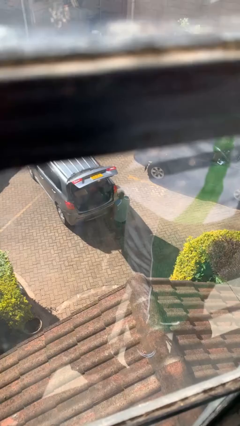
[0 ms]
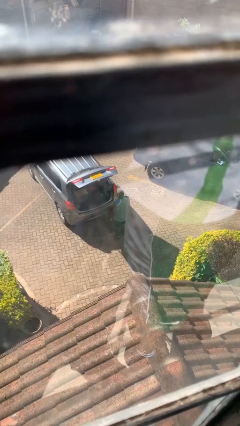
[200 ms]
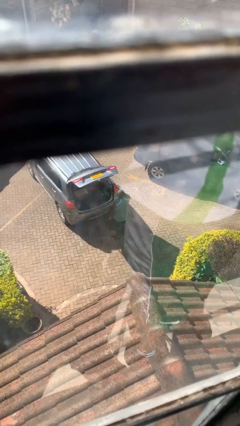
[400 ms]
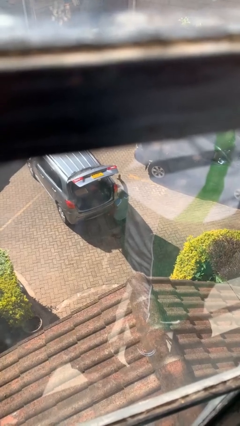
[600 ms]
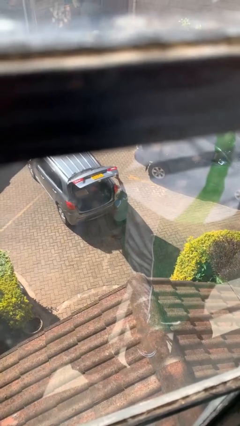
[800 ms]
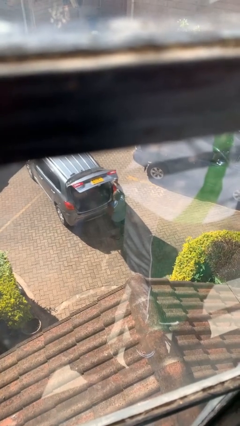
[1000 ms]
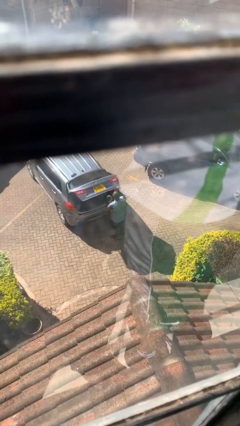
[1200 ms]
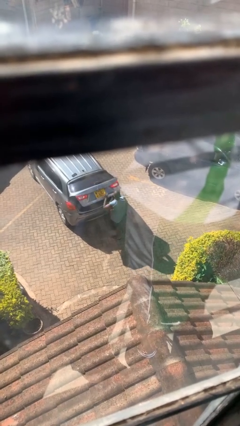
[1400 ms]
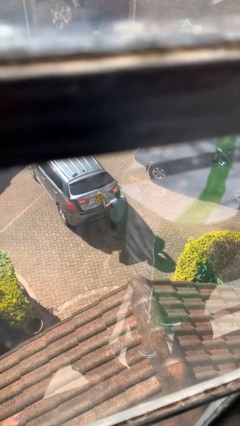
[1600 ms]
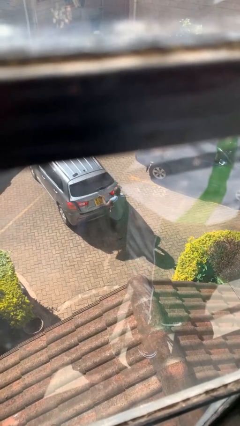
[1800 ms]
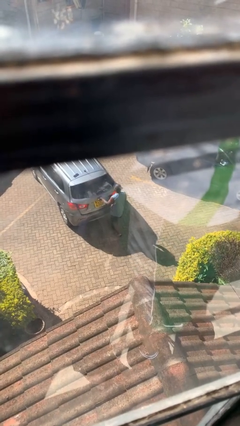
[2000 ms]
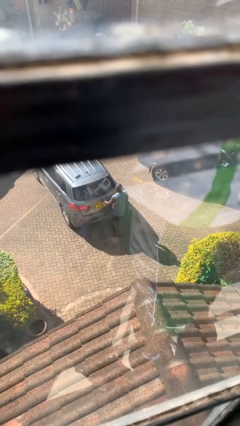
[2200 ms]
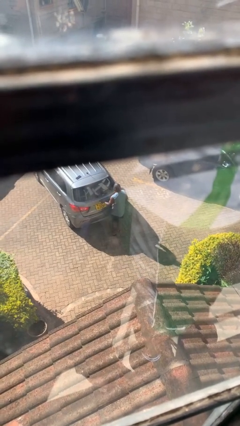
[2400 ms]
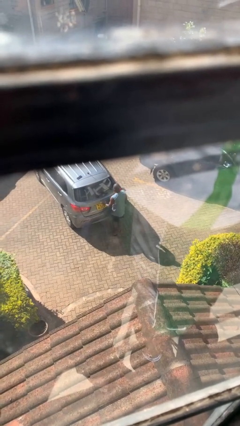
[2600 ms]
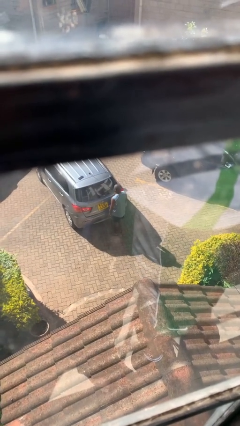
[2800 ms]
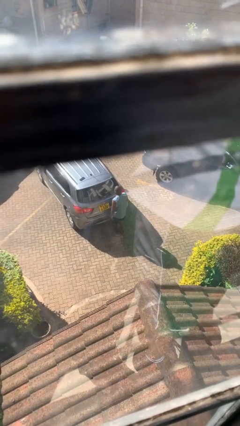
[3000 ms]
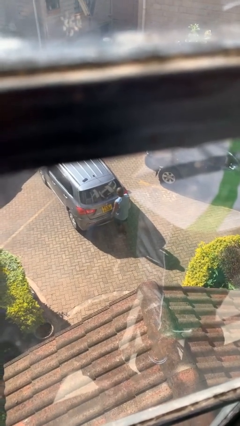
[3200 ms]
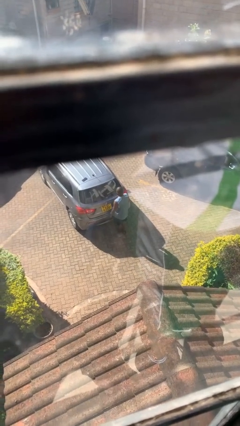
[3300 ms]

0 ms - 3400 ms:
person closes car trunk

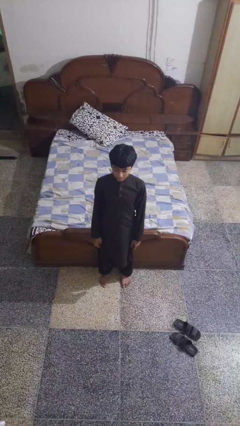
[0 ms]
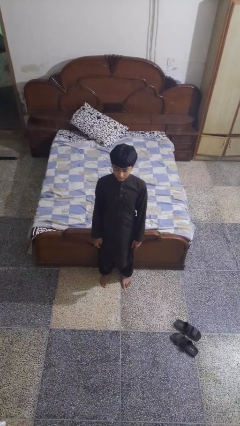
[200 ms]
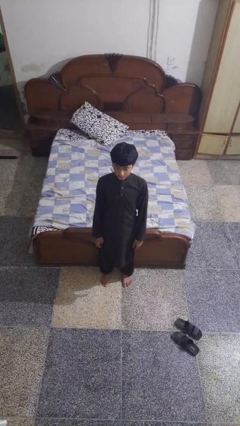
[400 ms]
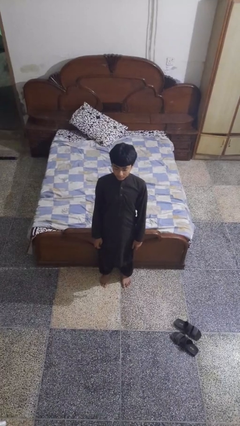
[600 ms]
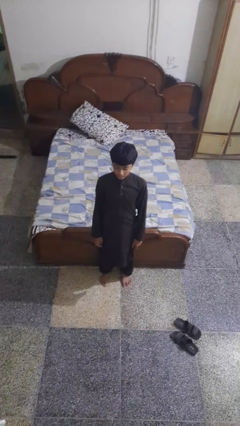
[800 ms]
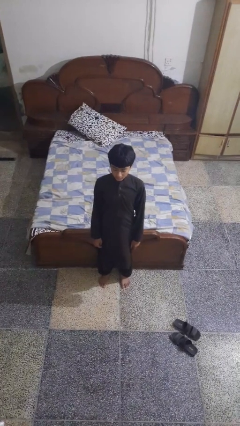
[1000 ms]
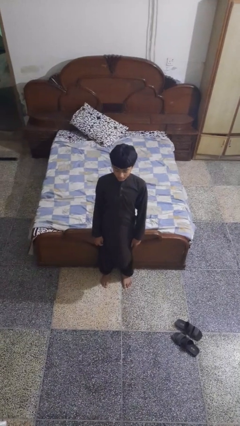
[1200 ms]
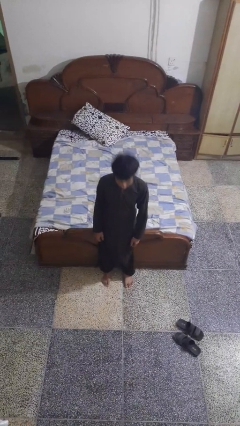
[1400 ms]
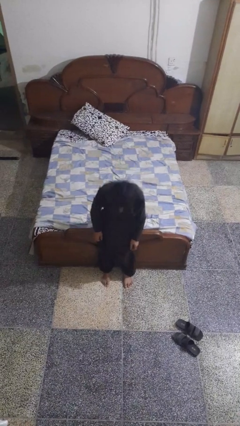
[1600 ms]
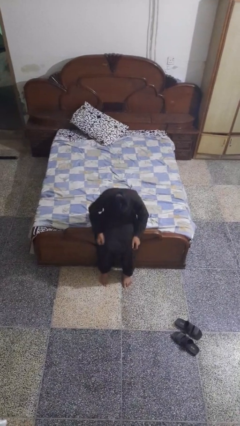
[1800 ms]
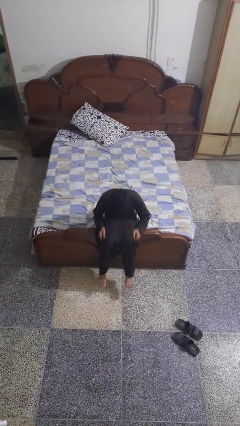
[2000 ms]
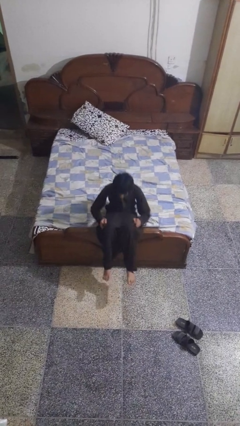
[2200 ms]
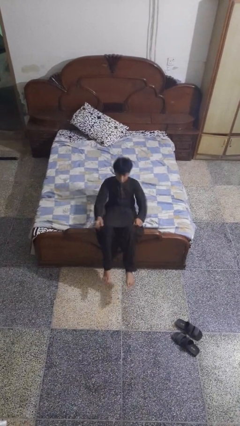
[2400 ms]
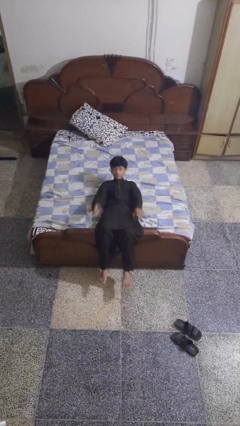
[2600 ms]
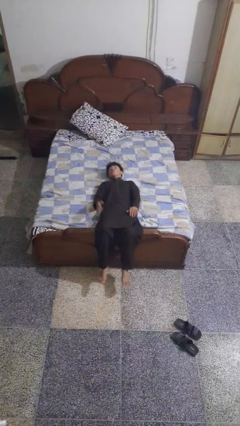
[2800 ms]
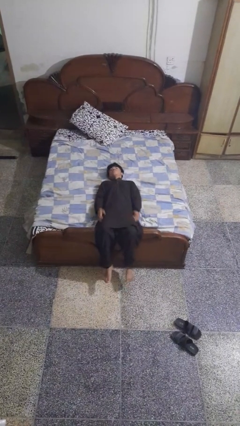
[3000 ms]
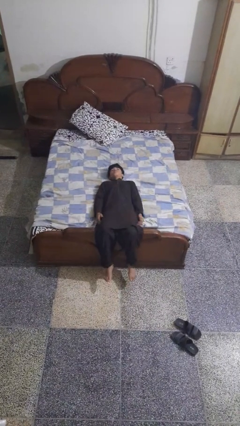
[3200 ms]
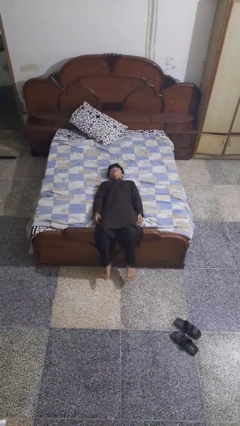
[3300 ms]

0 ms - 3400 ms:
person lies down on bed

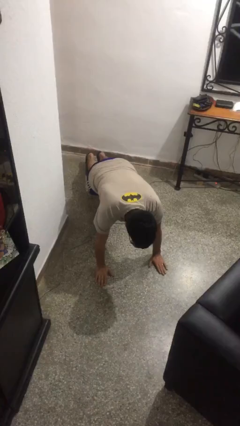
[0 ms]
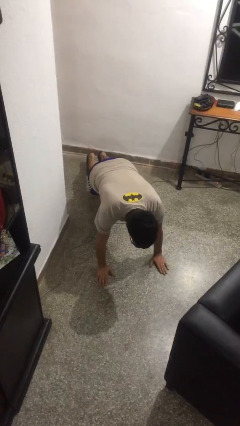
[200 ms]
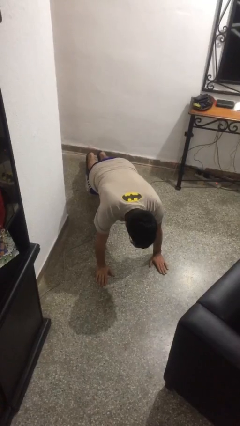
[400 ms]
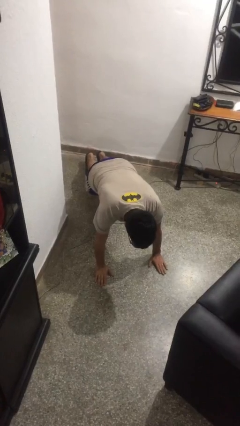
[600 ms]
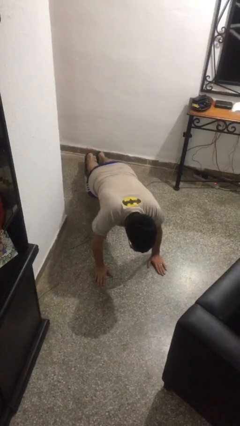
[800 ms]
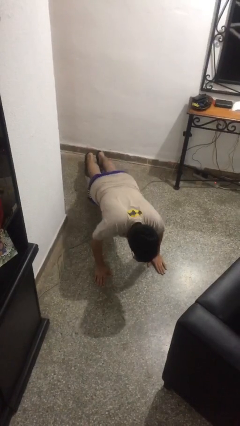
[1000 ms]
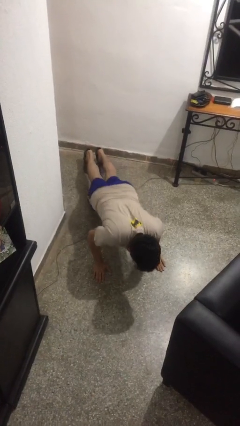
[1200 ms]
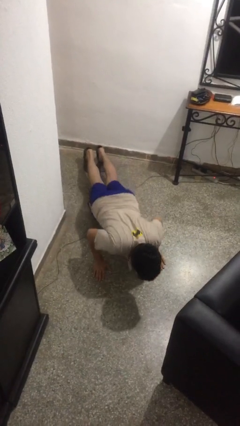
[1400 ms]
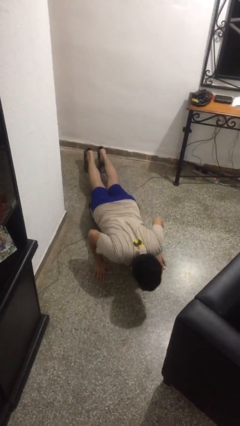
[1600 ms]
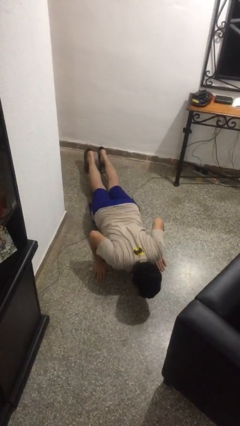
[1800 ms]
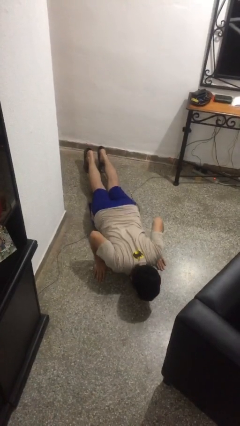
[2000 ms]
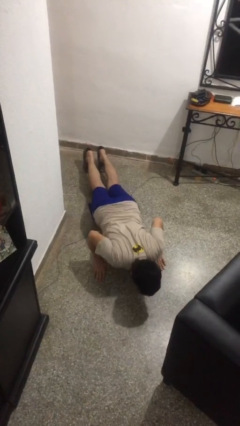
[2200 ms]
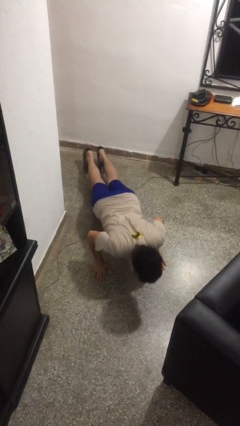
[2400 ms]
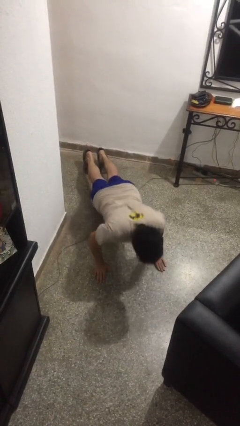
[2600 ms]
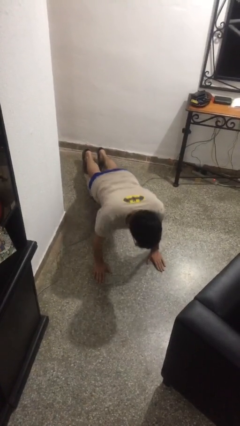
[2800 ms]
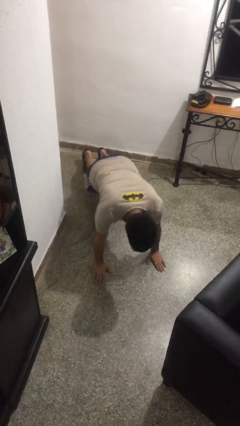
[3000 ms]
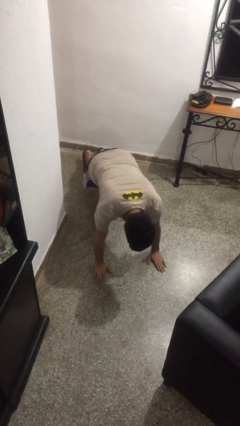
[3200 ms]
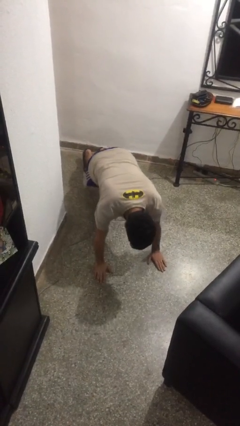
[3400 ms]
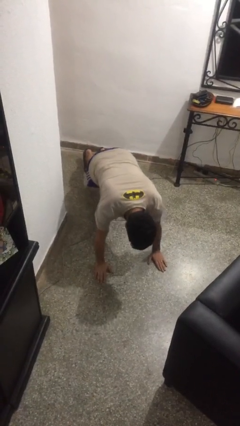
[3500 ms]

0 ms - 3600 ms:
person exercises with pushup

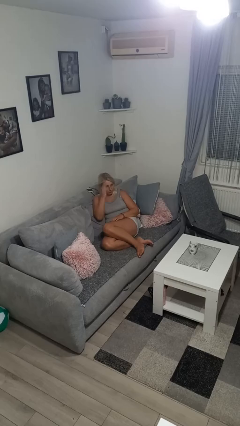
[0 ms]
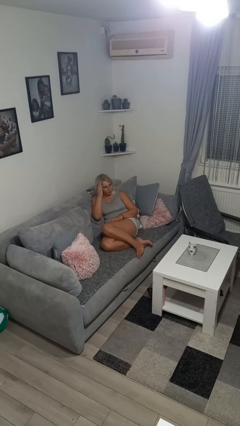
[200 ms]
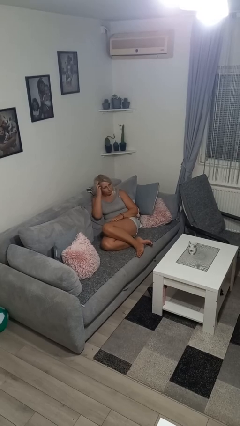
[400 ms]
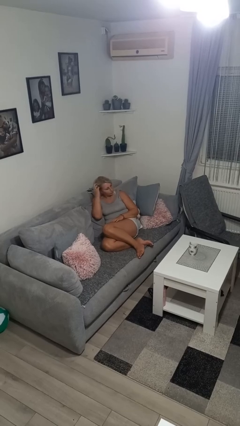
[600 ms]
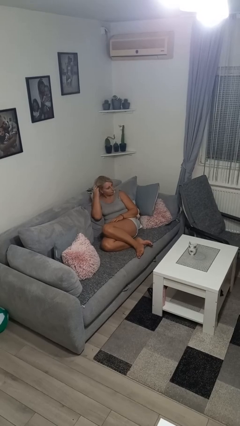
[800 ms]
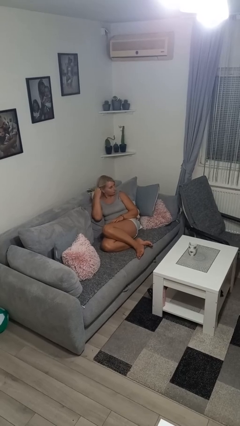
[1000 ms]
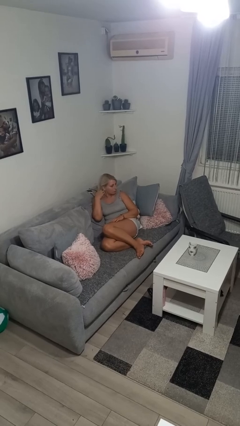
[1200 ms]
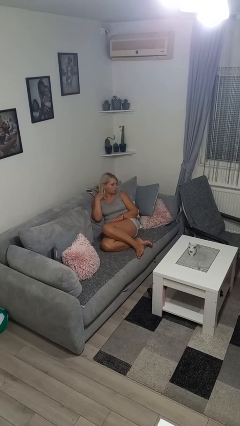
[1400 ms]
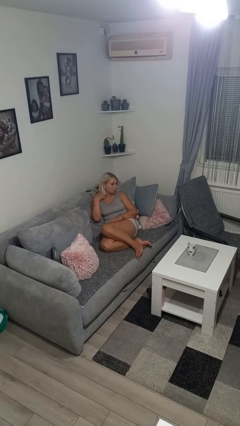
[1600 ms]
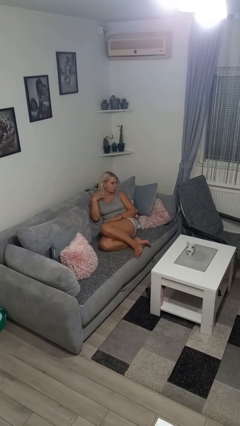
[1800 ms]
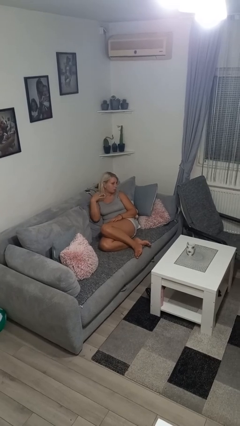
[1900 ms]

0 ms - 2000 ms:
person strokes hair

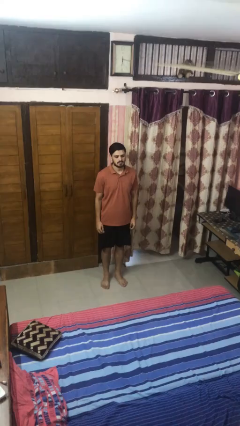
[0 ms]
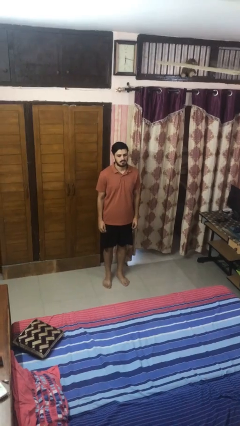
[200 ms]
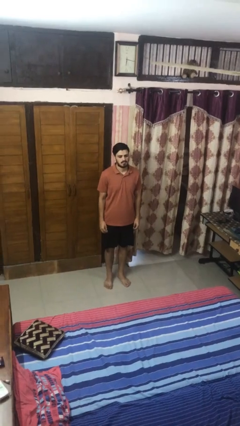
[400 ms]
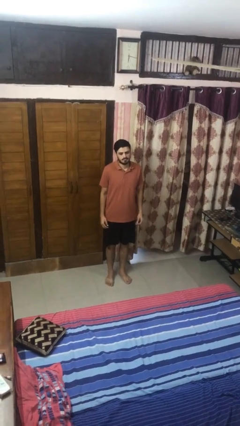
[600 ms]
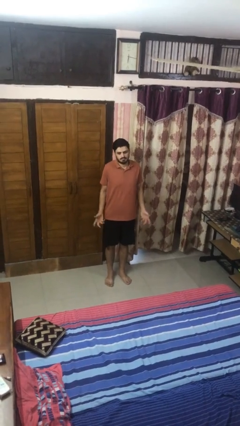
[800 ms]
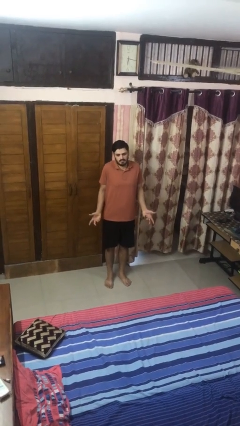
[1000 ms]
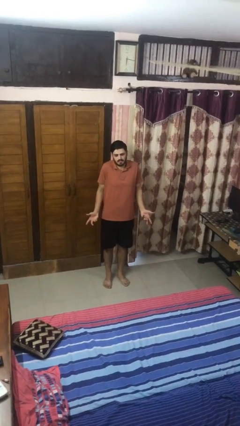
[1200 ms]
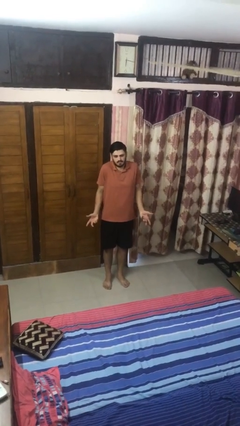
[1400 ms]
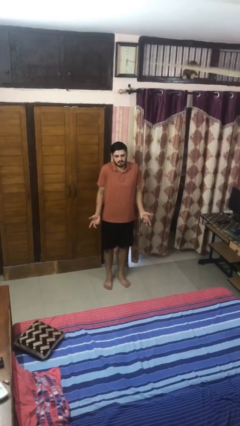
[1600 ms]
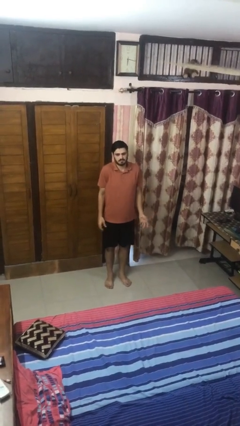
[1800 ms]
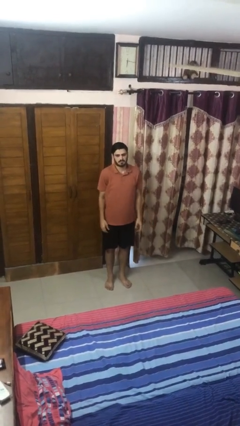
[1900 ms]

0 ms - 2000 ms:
person shrugs

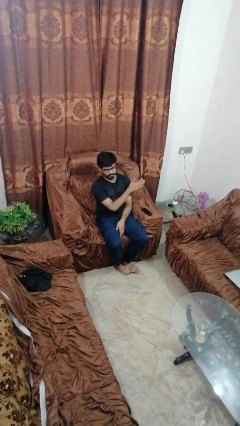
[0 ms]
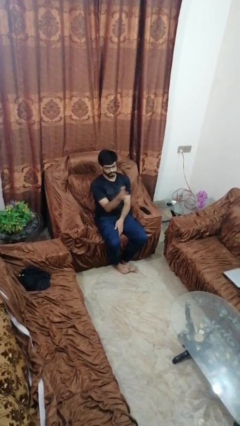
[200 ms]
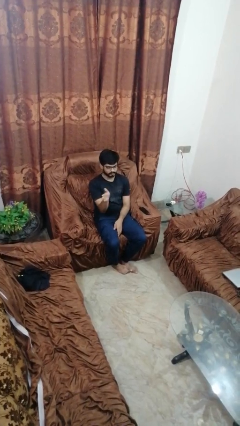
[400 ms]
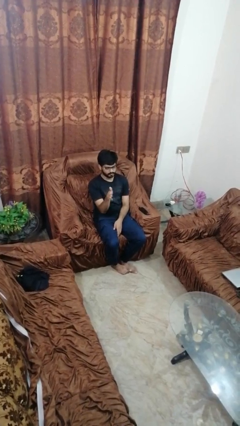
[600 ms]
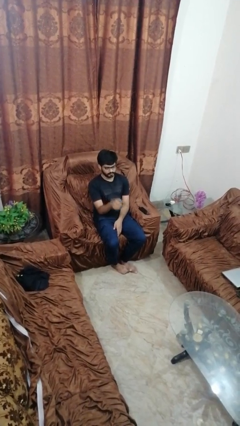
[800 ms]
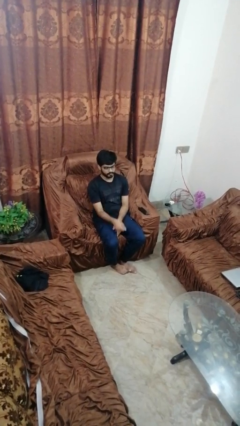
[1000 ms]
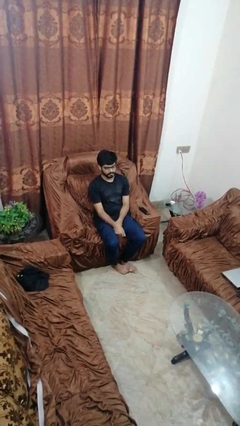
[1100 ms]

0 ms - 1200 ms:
person gestures swipe right

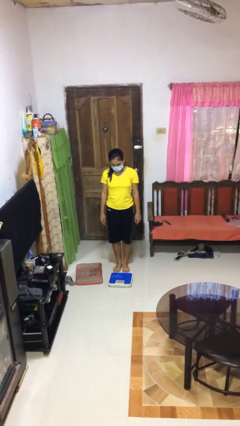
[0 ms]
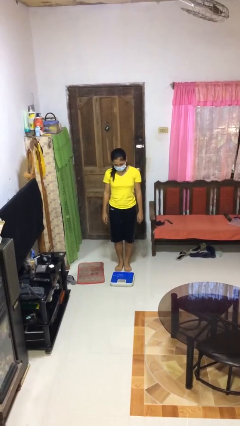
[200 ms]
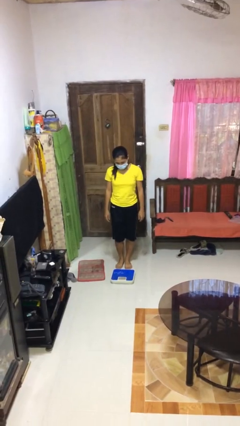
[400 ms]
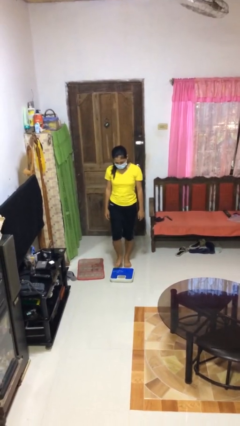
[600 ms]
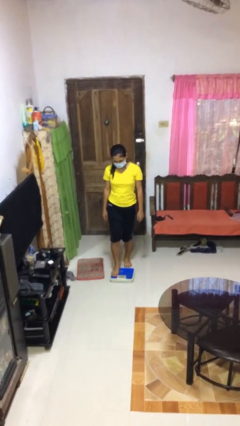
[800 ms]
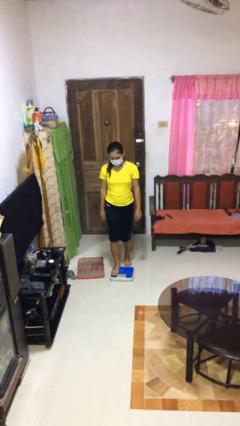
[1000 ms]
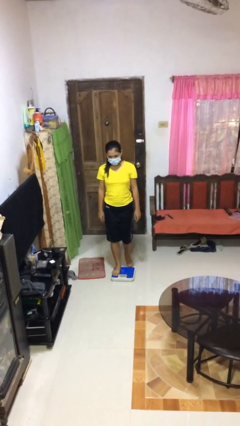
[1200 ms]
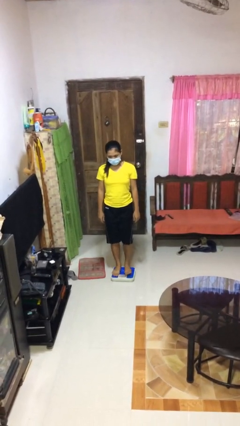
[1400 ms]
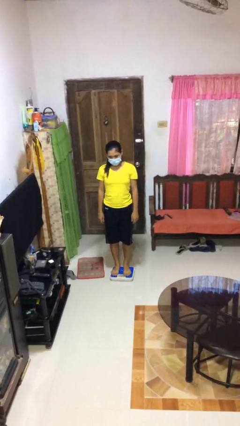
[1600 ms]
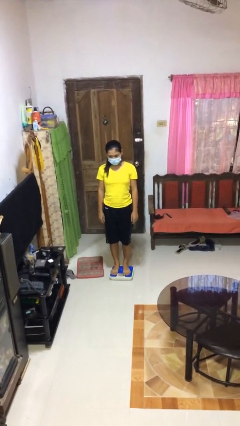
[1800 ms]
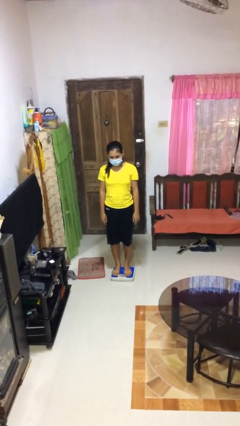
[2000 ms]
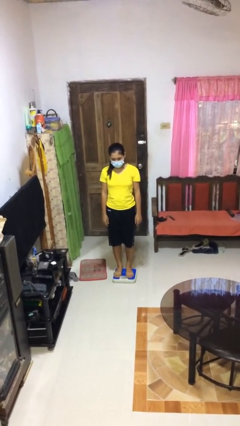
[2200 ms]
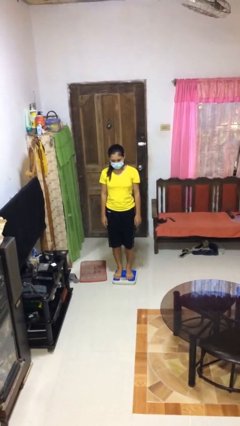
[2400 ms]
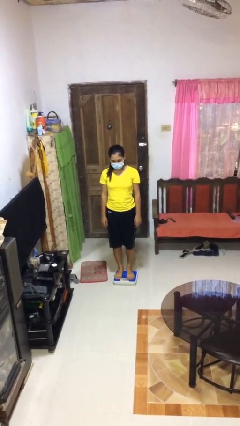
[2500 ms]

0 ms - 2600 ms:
person uses bodyweight scale
